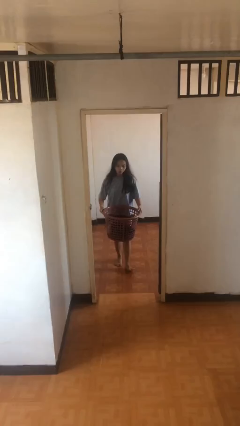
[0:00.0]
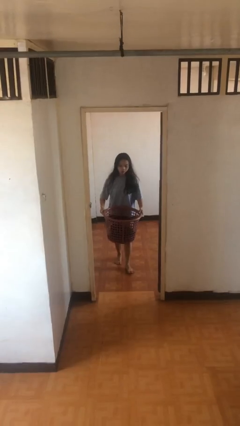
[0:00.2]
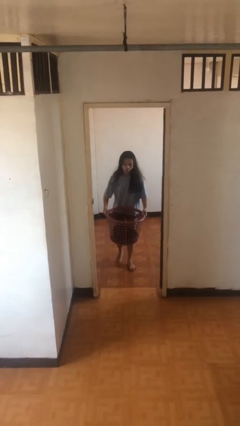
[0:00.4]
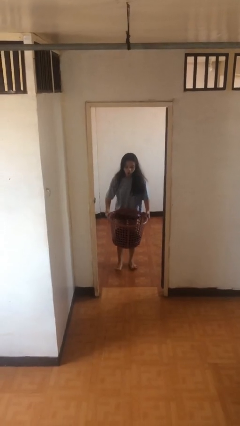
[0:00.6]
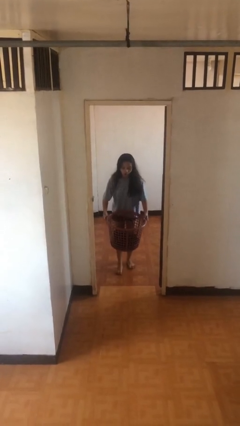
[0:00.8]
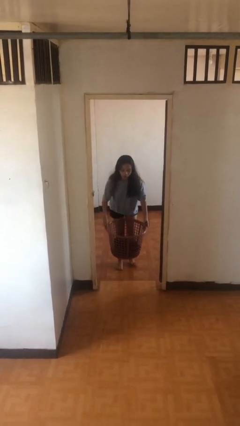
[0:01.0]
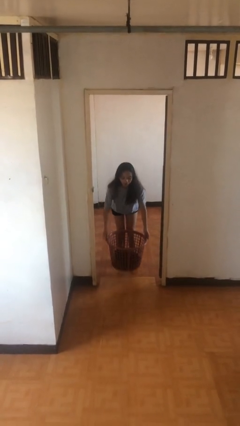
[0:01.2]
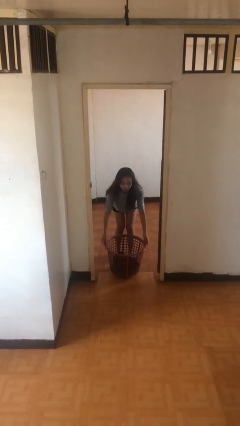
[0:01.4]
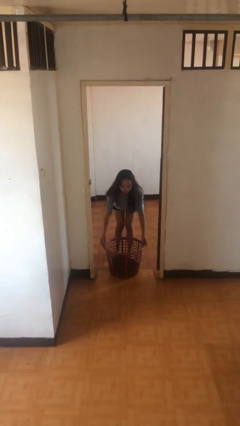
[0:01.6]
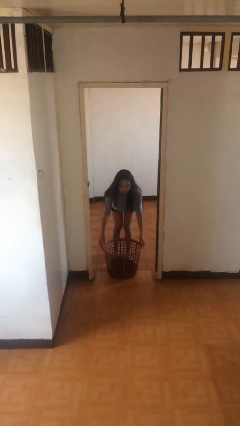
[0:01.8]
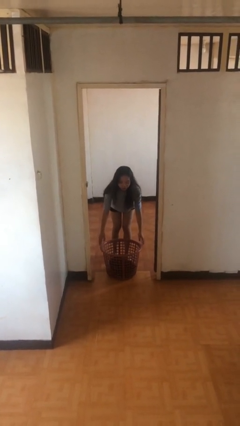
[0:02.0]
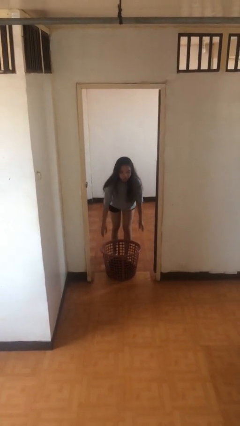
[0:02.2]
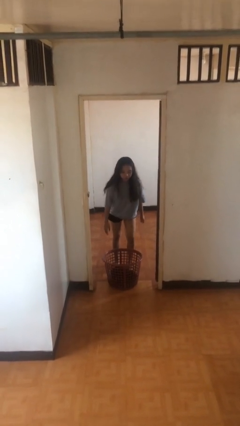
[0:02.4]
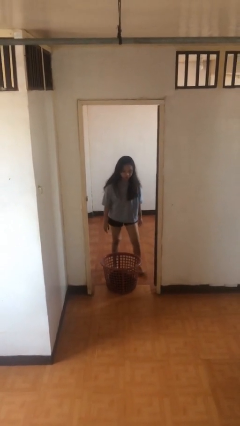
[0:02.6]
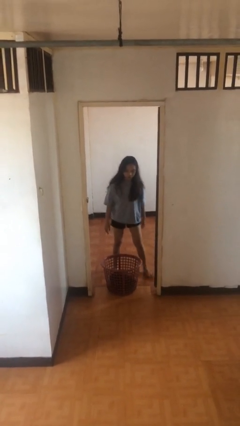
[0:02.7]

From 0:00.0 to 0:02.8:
person puts down object on floor

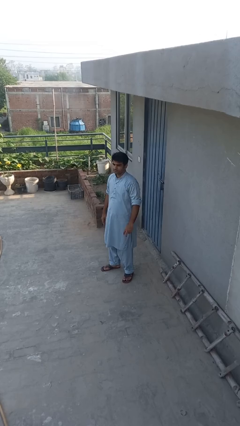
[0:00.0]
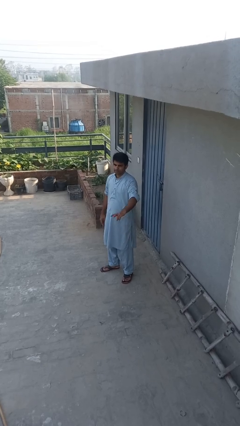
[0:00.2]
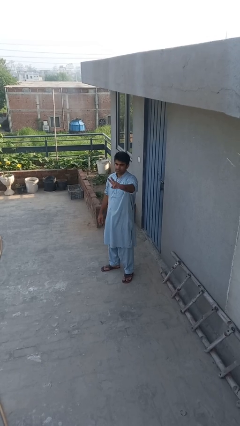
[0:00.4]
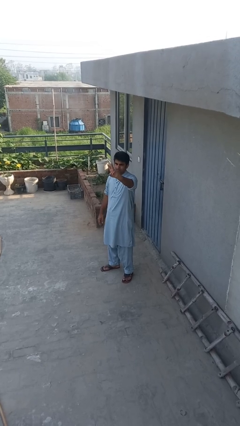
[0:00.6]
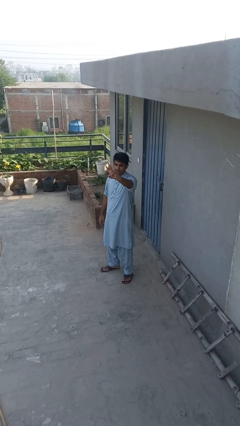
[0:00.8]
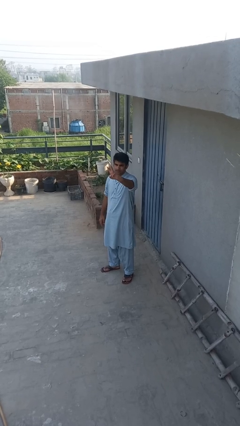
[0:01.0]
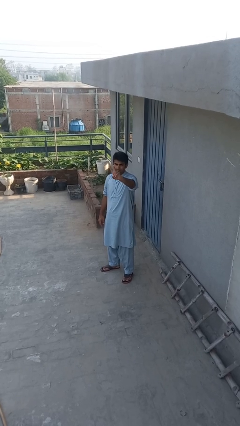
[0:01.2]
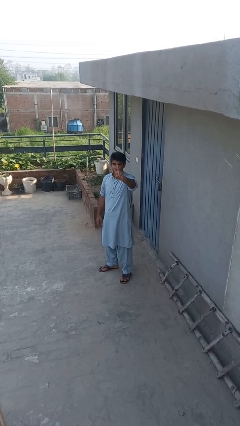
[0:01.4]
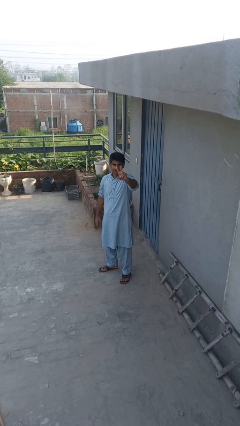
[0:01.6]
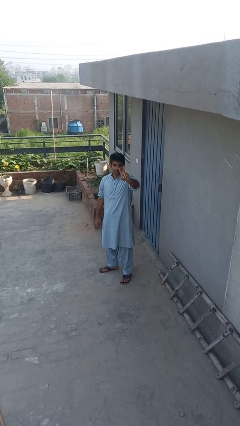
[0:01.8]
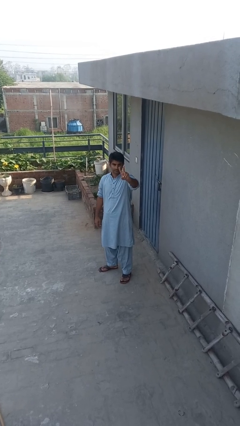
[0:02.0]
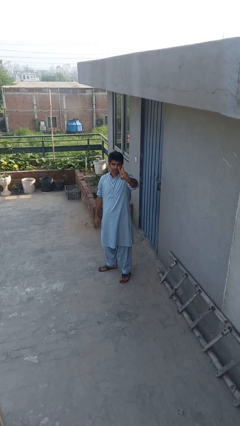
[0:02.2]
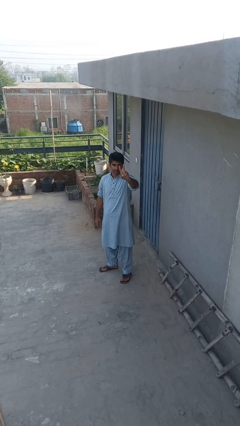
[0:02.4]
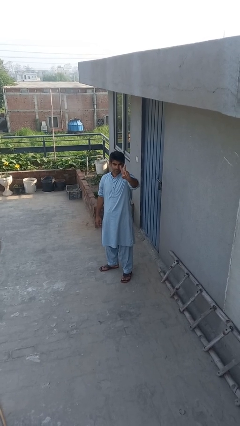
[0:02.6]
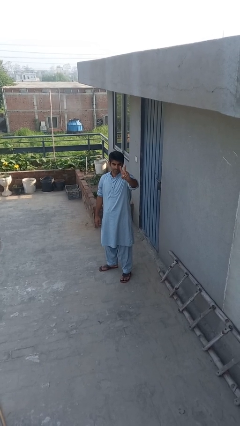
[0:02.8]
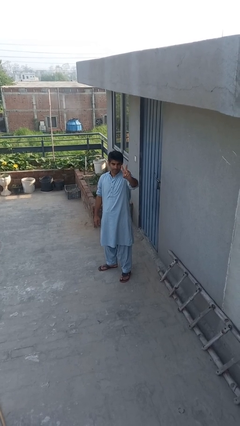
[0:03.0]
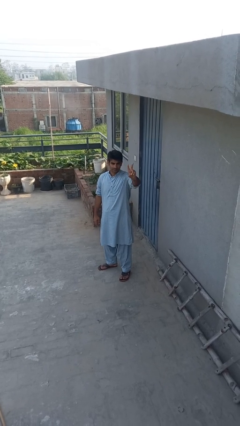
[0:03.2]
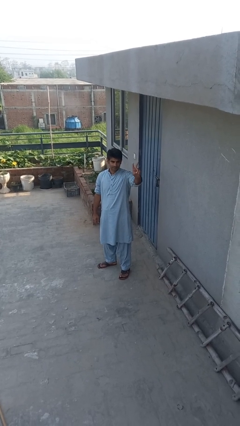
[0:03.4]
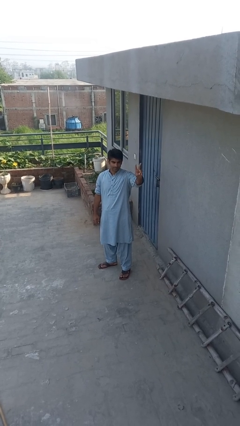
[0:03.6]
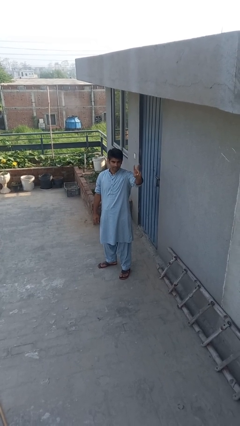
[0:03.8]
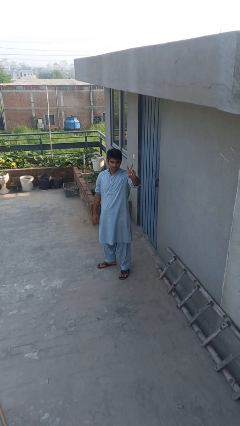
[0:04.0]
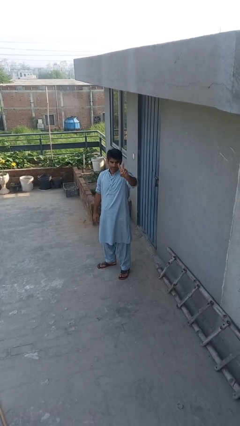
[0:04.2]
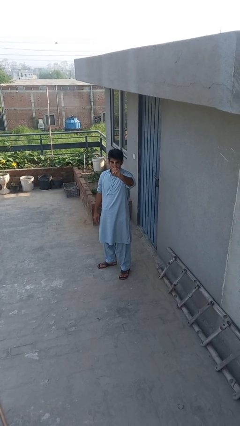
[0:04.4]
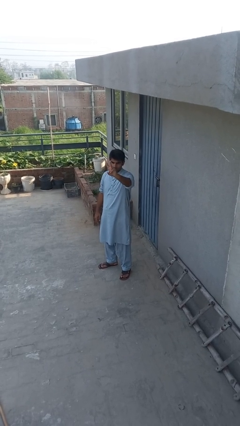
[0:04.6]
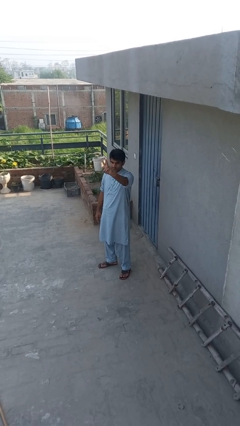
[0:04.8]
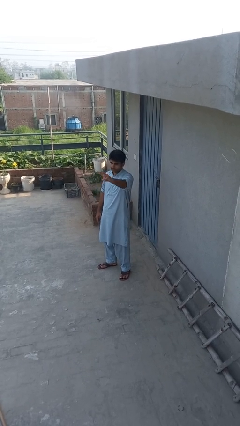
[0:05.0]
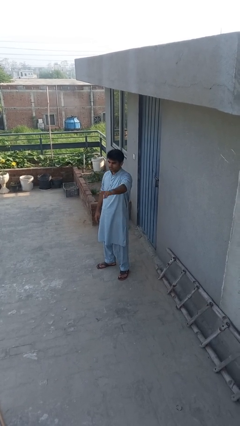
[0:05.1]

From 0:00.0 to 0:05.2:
person gestures peace

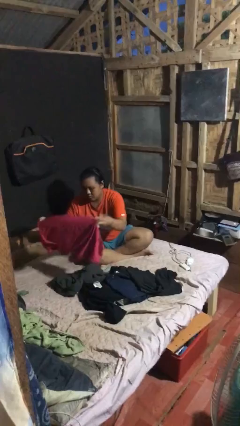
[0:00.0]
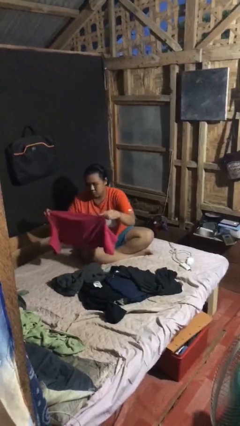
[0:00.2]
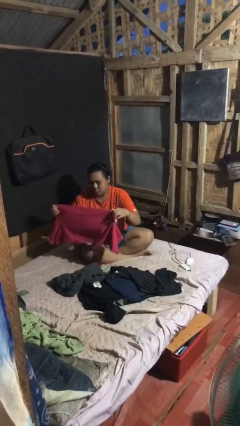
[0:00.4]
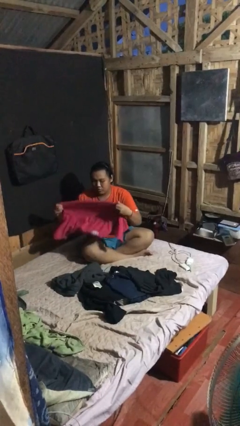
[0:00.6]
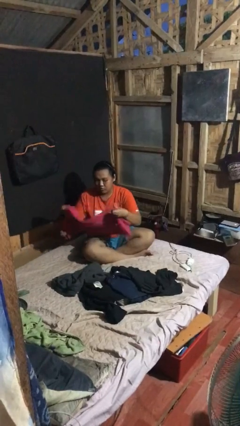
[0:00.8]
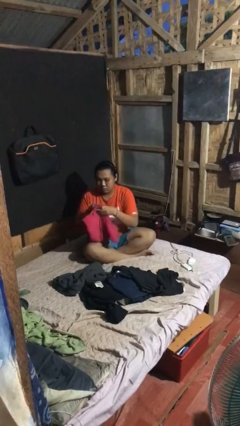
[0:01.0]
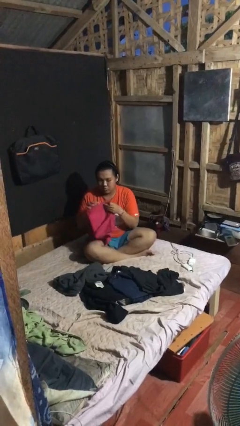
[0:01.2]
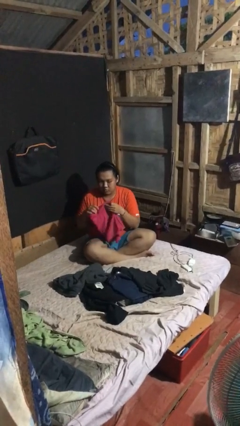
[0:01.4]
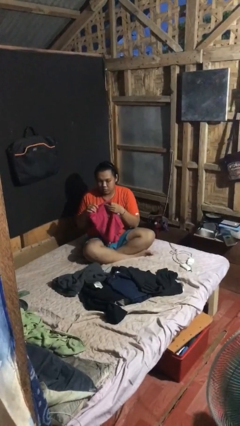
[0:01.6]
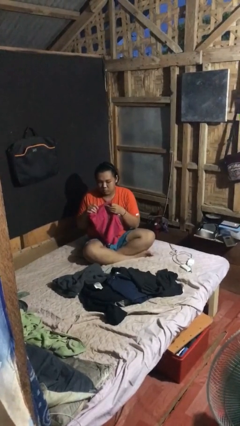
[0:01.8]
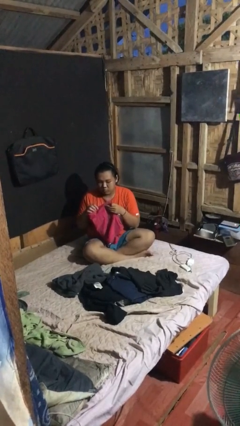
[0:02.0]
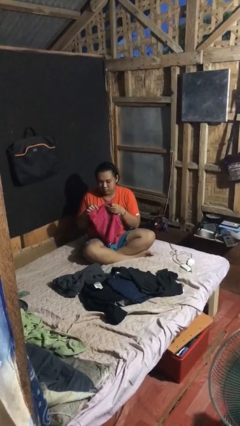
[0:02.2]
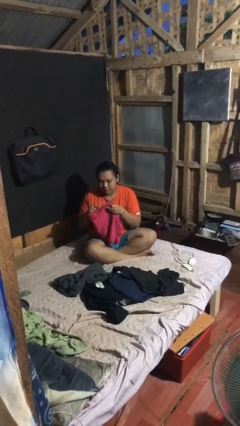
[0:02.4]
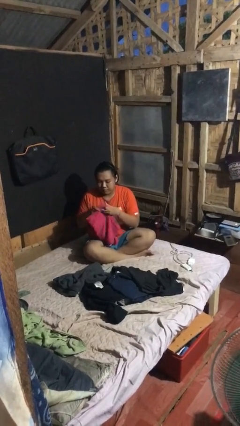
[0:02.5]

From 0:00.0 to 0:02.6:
person folds shirt

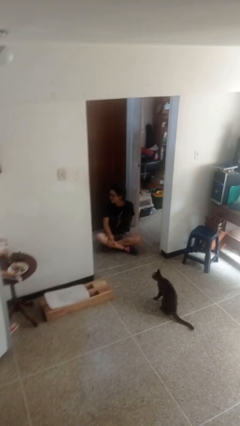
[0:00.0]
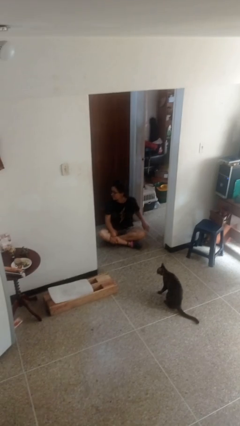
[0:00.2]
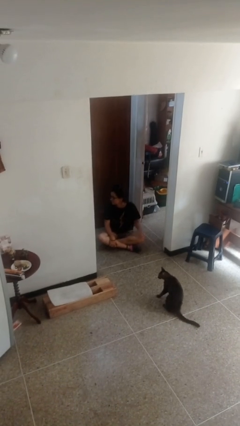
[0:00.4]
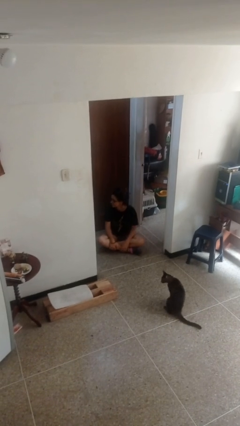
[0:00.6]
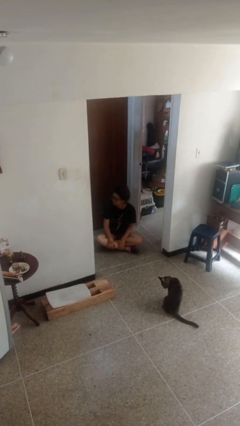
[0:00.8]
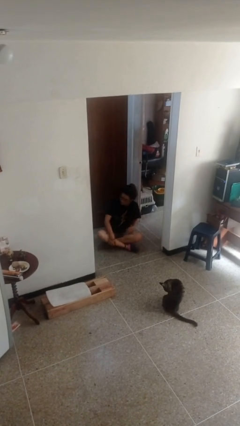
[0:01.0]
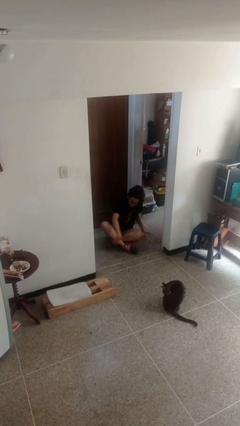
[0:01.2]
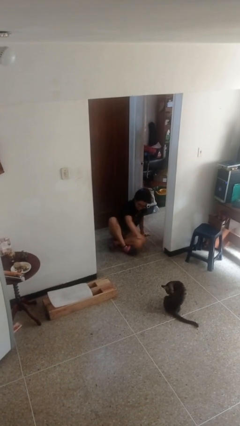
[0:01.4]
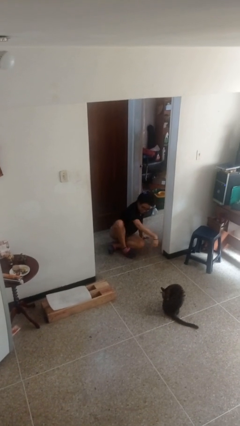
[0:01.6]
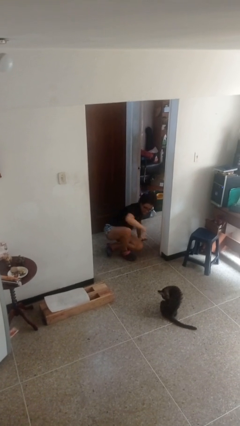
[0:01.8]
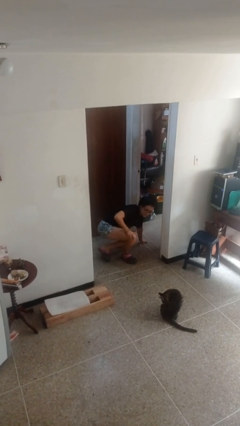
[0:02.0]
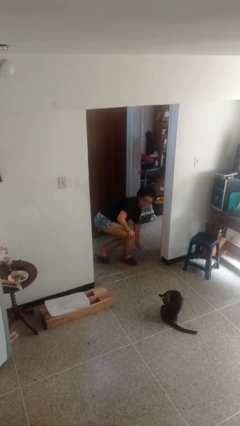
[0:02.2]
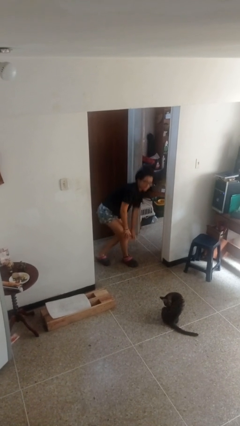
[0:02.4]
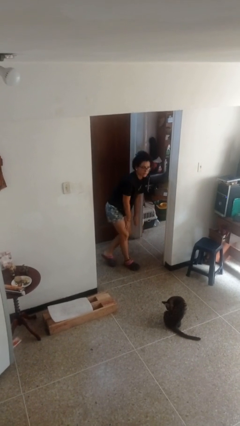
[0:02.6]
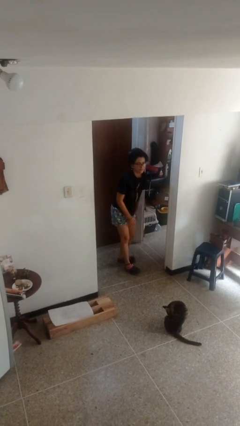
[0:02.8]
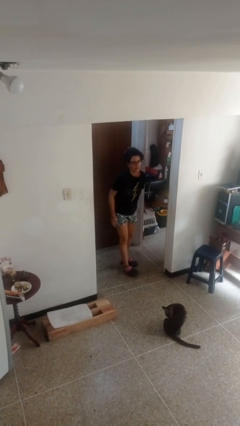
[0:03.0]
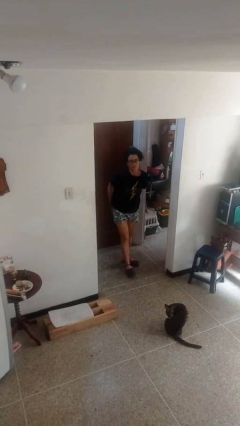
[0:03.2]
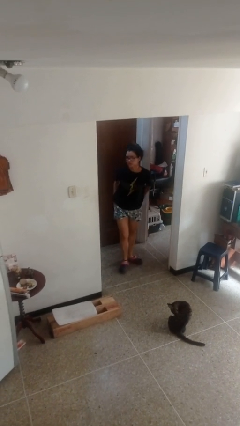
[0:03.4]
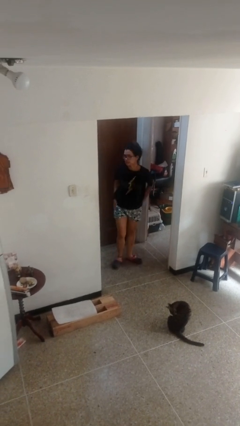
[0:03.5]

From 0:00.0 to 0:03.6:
person stands up from floor

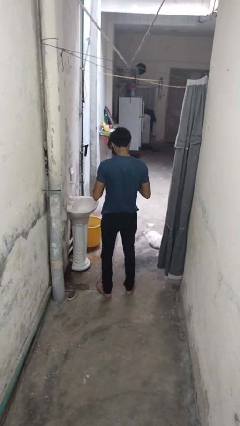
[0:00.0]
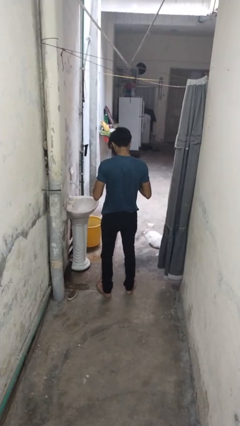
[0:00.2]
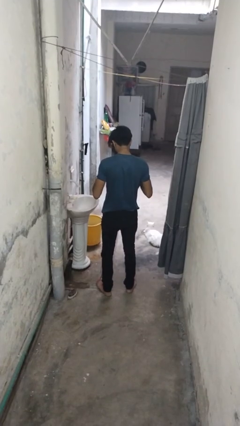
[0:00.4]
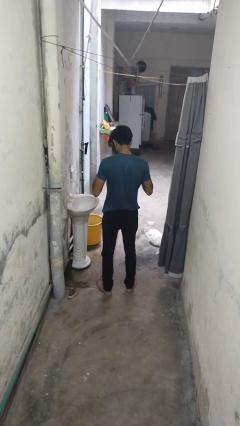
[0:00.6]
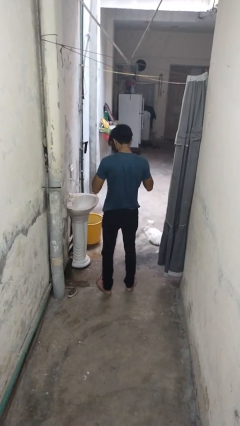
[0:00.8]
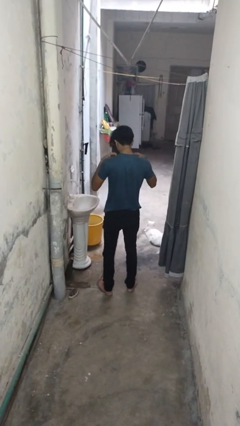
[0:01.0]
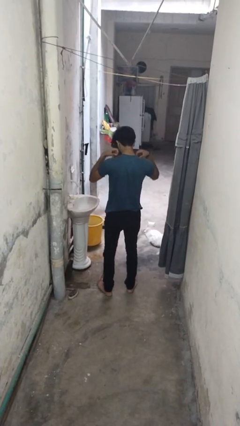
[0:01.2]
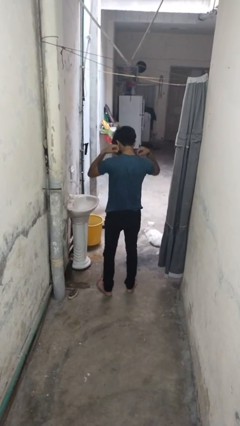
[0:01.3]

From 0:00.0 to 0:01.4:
person takes off necklace

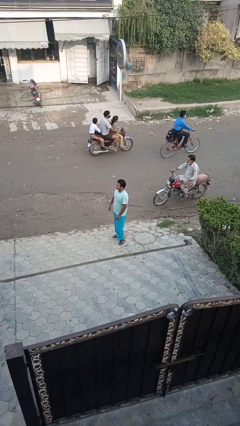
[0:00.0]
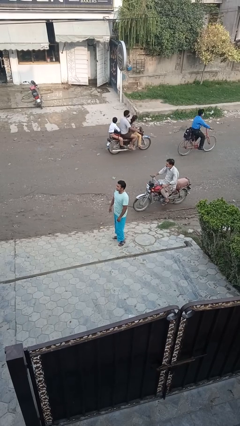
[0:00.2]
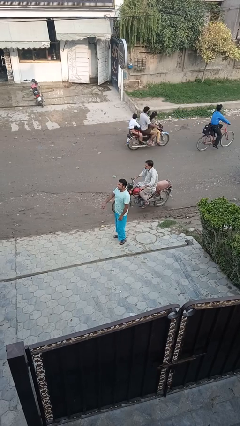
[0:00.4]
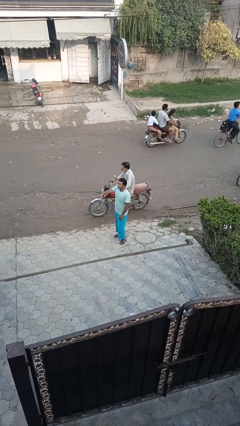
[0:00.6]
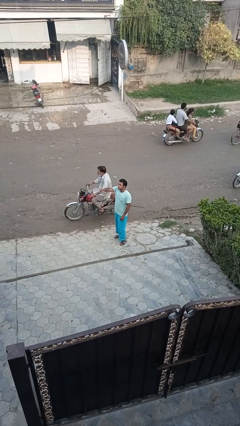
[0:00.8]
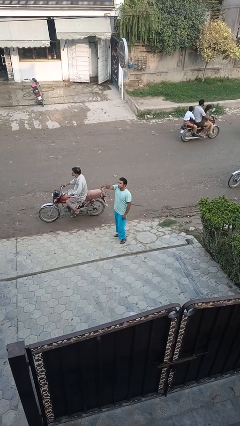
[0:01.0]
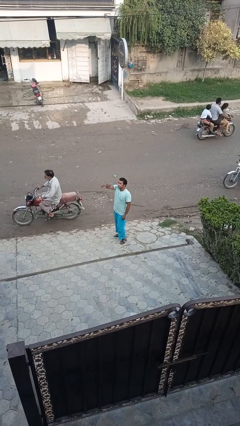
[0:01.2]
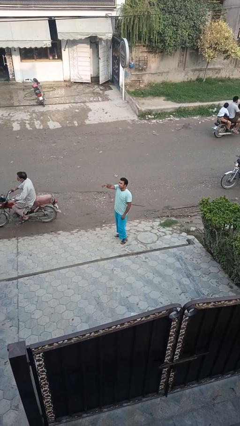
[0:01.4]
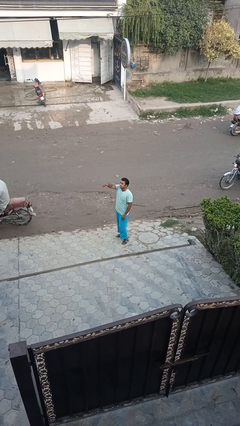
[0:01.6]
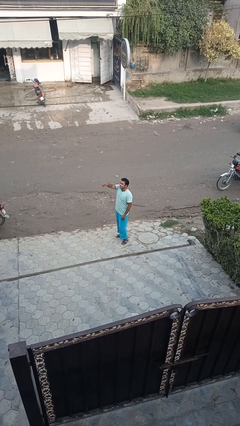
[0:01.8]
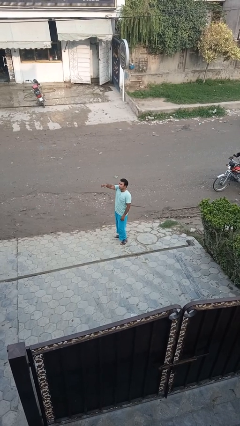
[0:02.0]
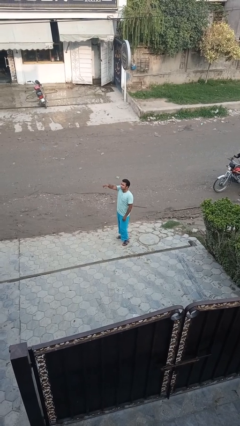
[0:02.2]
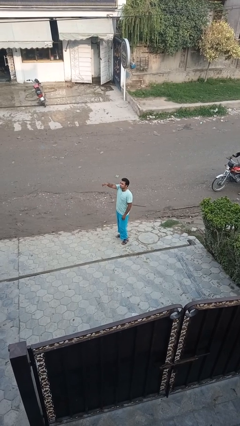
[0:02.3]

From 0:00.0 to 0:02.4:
person points at person
